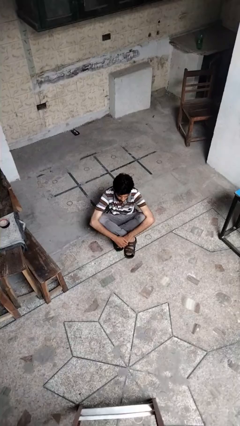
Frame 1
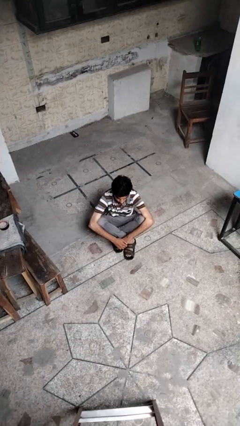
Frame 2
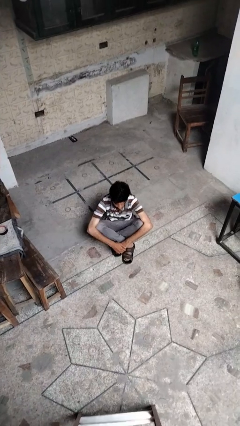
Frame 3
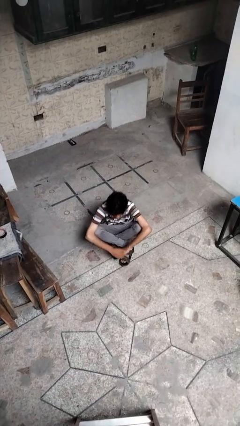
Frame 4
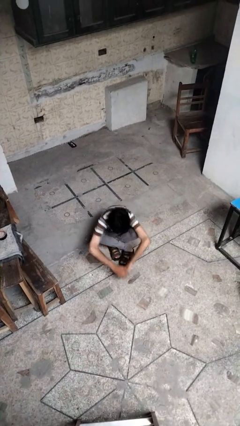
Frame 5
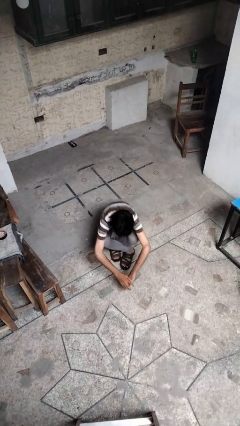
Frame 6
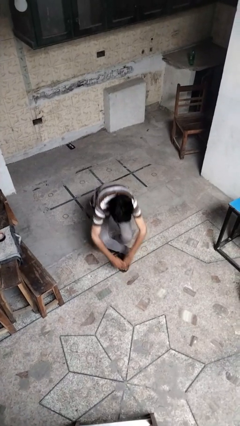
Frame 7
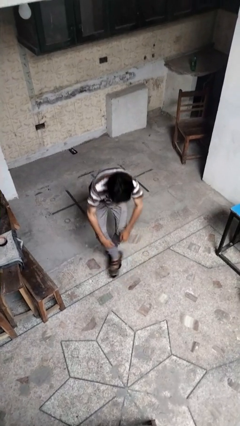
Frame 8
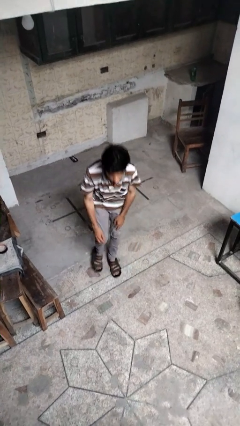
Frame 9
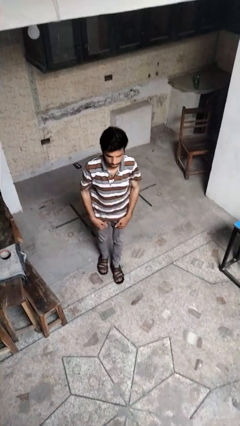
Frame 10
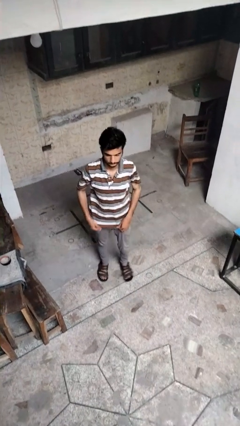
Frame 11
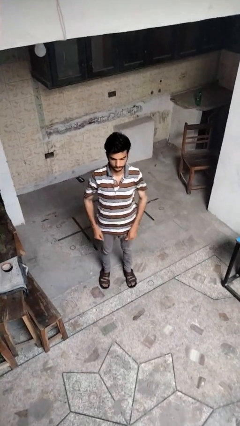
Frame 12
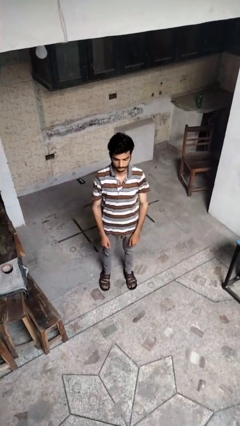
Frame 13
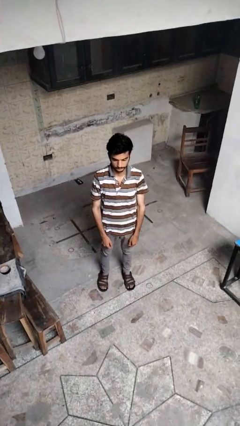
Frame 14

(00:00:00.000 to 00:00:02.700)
person stands up from floor

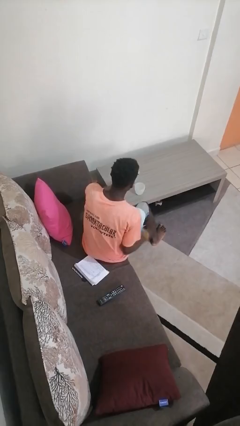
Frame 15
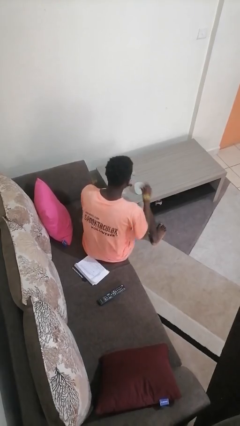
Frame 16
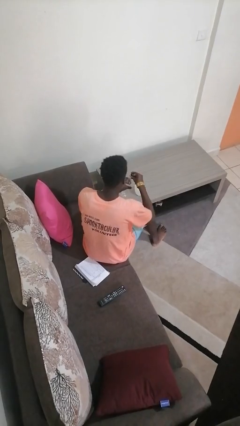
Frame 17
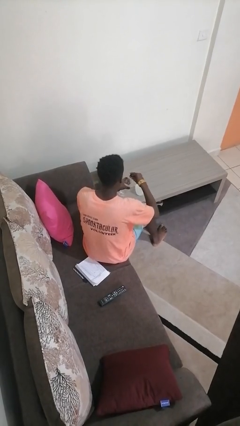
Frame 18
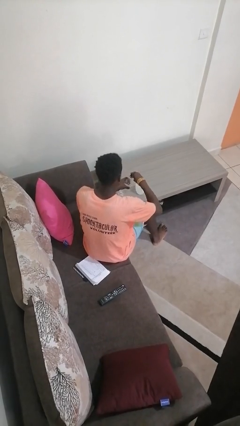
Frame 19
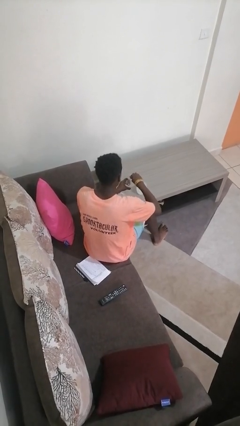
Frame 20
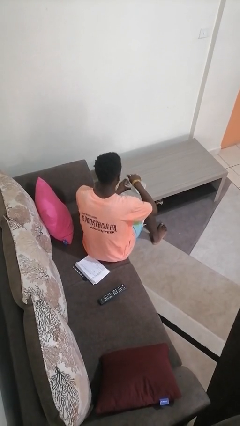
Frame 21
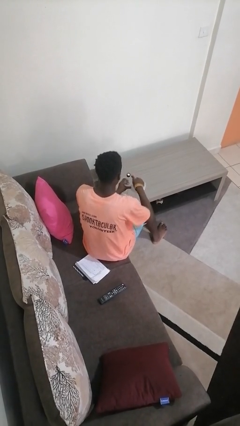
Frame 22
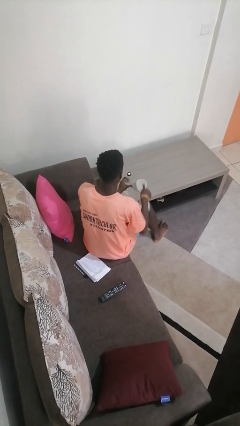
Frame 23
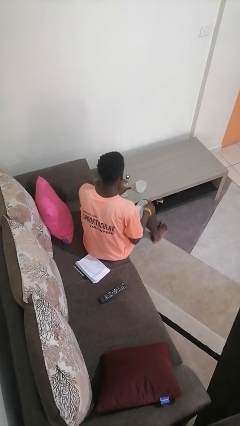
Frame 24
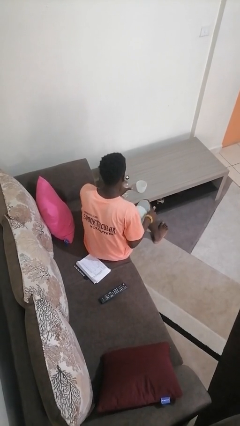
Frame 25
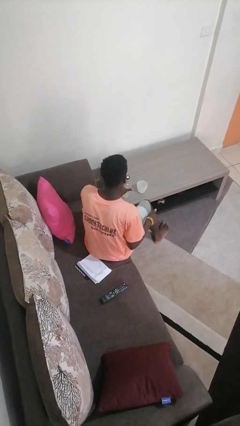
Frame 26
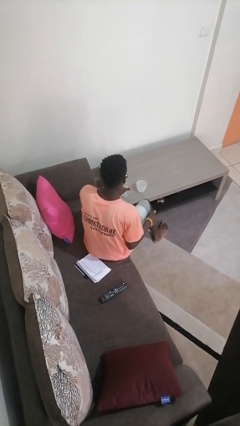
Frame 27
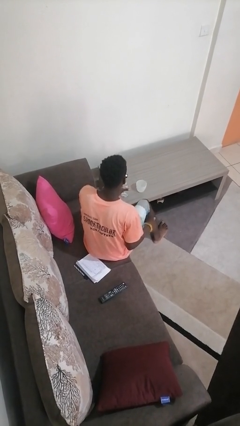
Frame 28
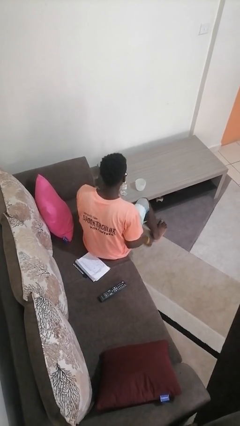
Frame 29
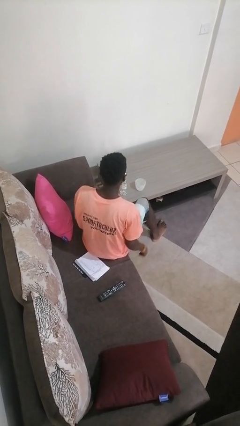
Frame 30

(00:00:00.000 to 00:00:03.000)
person screws lid to bottle

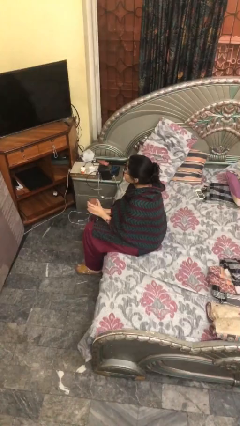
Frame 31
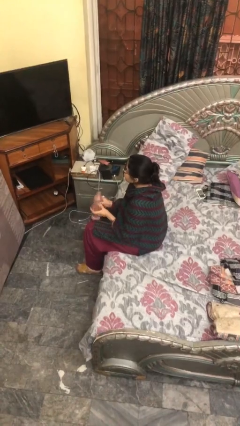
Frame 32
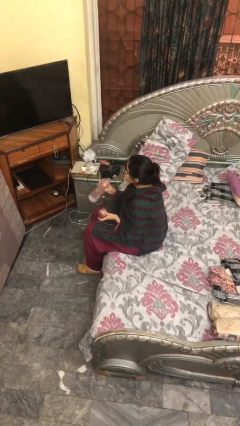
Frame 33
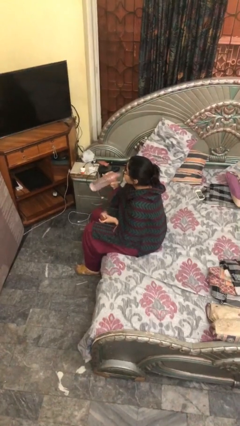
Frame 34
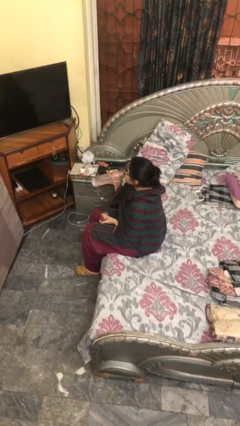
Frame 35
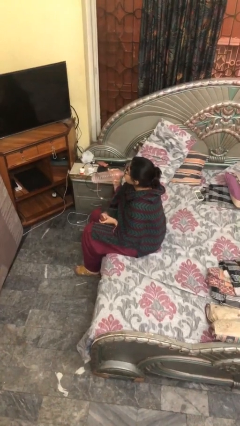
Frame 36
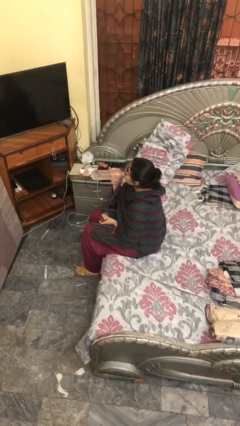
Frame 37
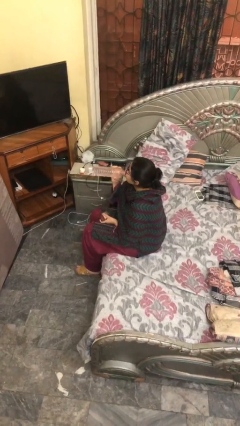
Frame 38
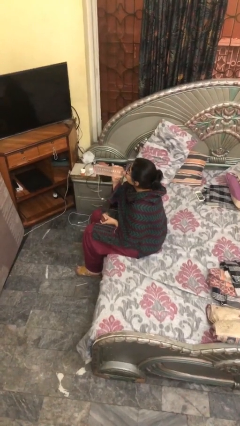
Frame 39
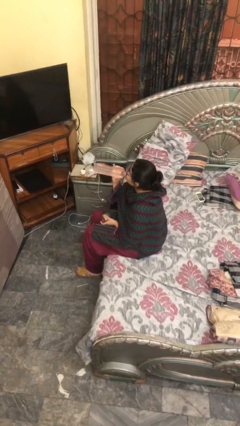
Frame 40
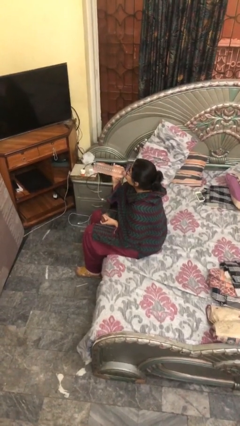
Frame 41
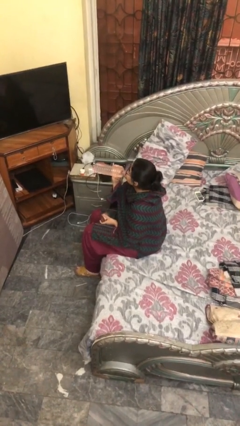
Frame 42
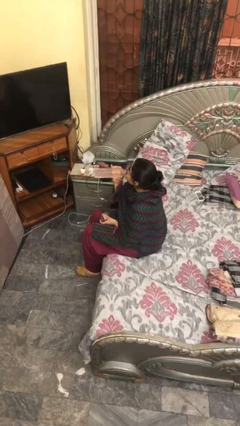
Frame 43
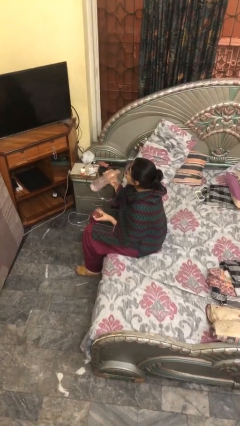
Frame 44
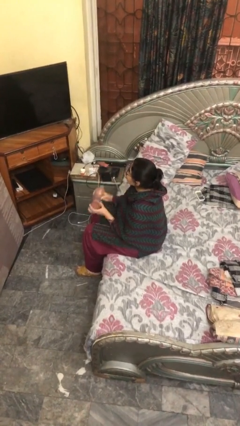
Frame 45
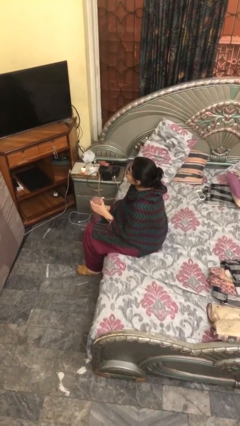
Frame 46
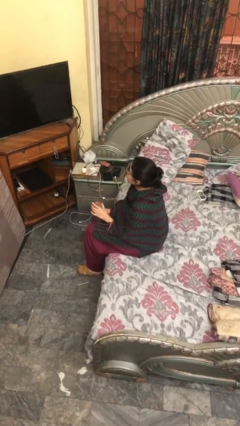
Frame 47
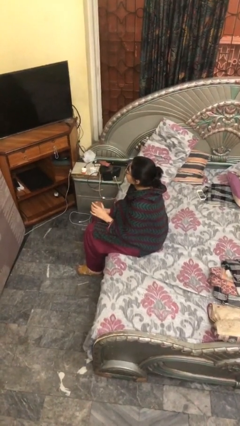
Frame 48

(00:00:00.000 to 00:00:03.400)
person drinks from bottle

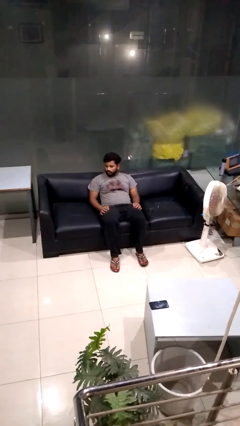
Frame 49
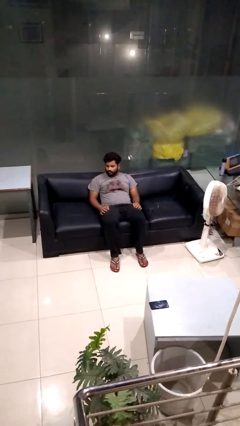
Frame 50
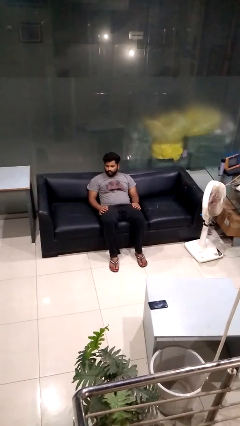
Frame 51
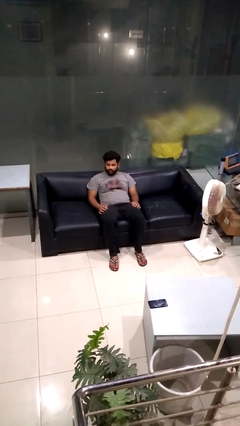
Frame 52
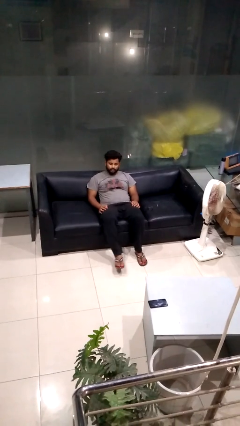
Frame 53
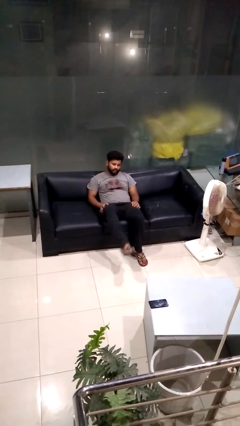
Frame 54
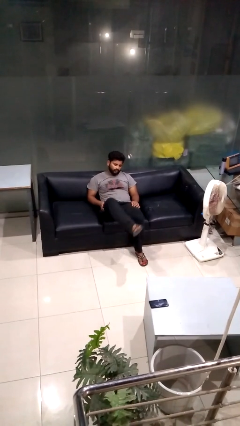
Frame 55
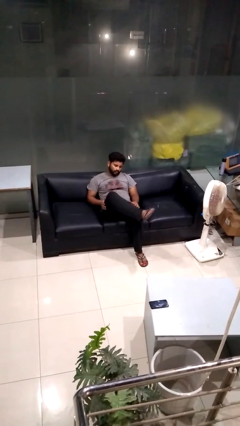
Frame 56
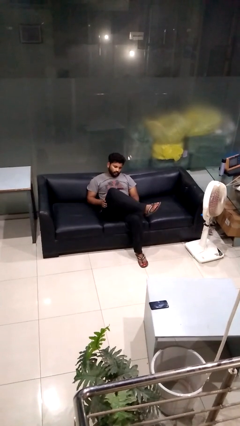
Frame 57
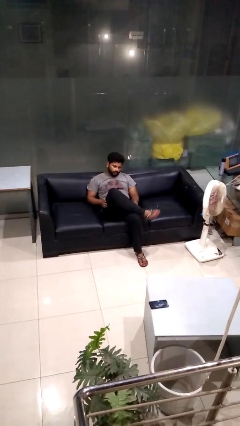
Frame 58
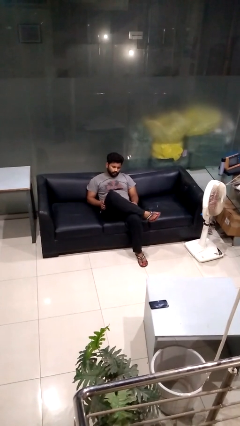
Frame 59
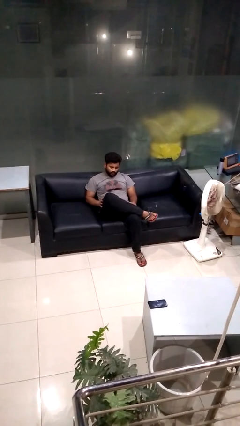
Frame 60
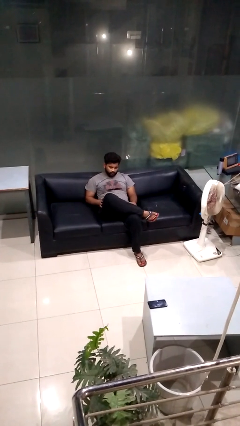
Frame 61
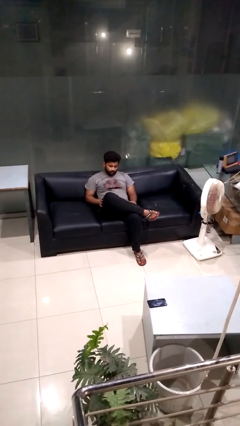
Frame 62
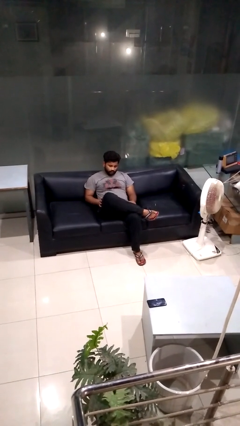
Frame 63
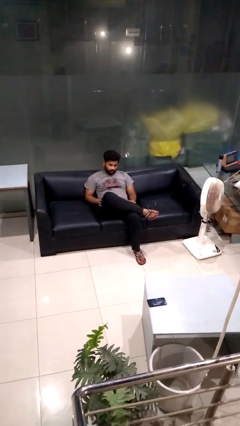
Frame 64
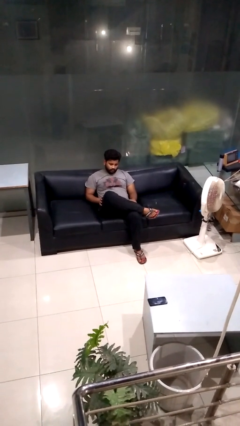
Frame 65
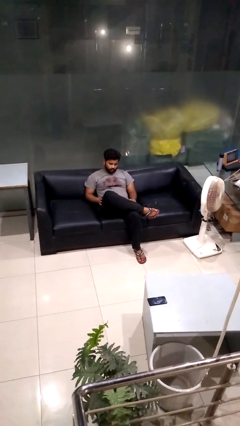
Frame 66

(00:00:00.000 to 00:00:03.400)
person crosses legs

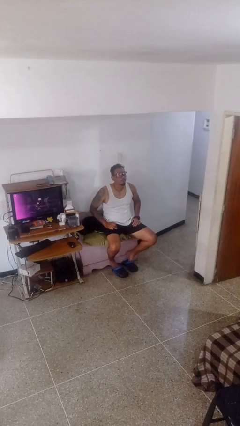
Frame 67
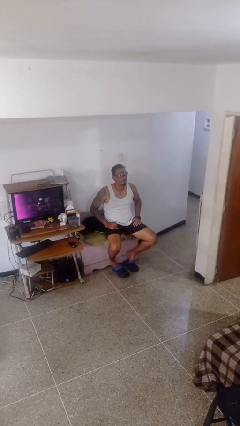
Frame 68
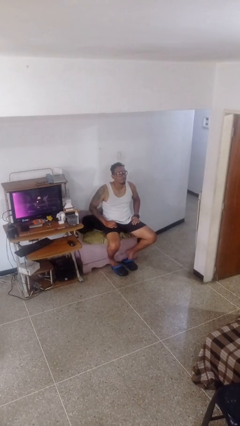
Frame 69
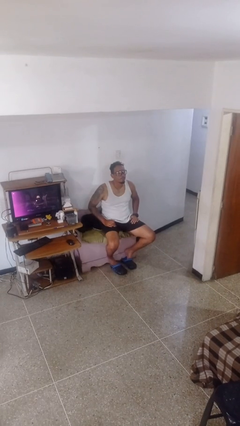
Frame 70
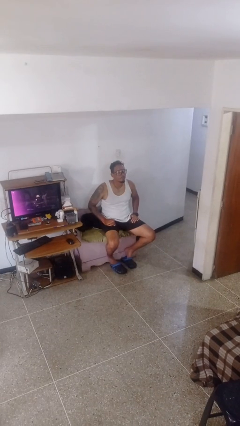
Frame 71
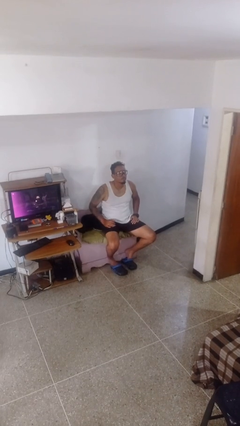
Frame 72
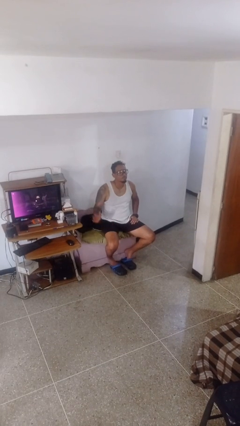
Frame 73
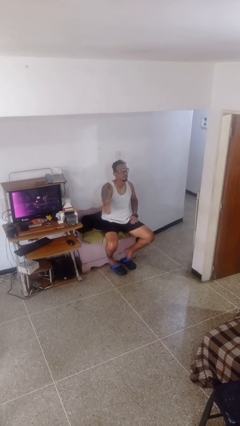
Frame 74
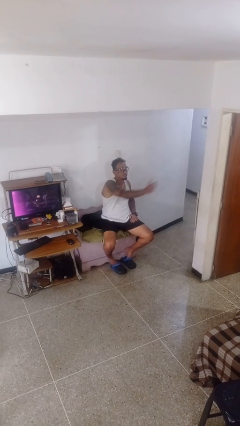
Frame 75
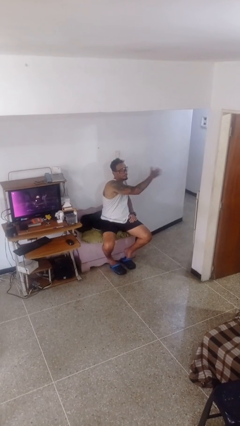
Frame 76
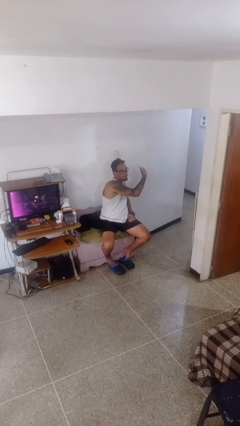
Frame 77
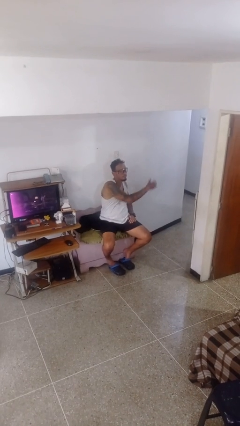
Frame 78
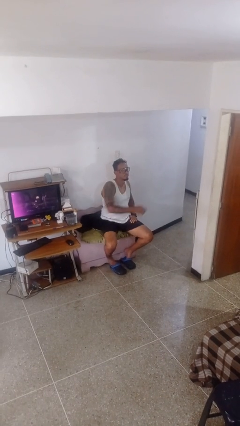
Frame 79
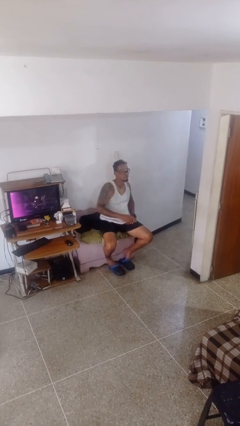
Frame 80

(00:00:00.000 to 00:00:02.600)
person gestures swipe left

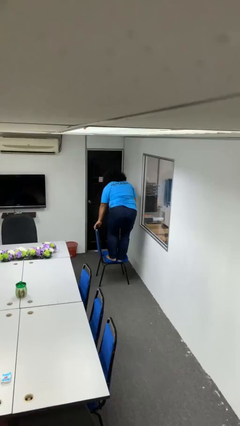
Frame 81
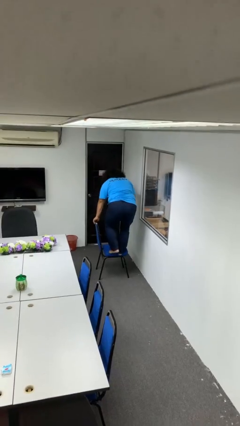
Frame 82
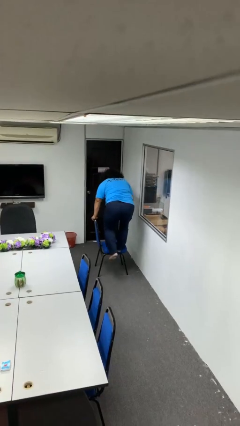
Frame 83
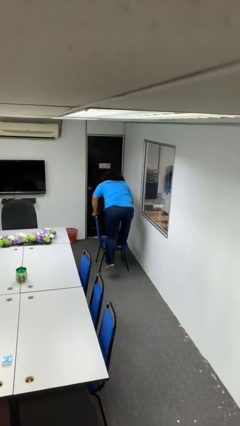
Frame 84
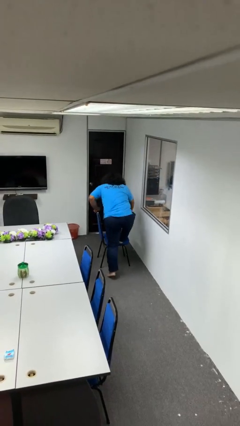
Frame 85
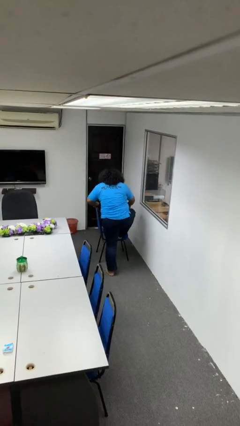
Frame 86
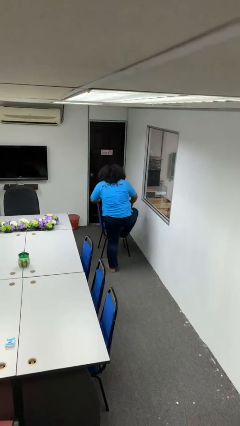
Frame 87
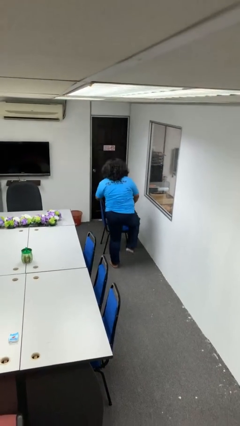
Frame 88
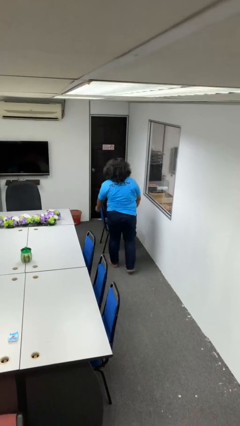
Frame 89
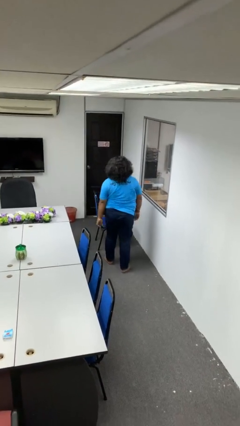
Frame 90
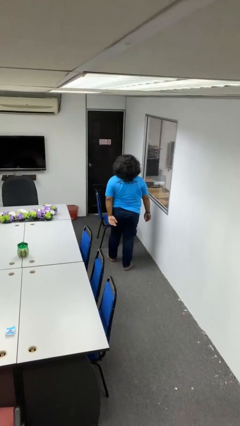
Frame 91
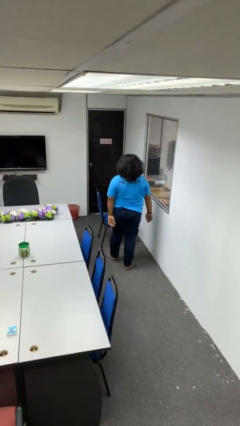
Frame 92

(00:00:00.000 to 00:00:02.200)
person climbs off chair
